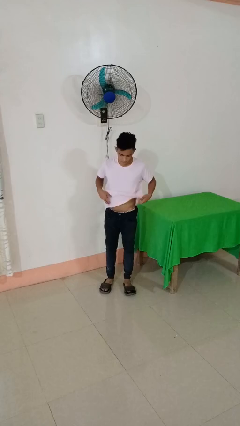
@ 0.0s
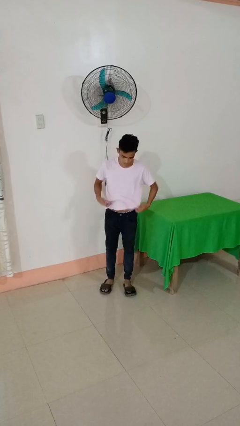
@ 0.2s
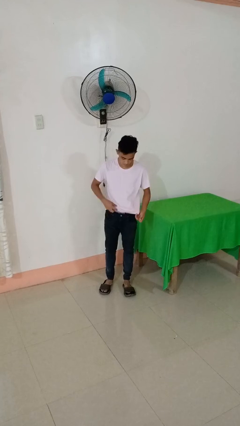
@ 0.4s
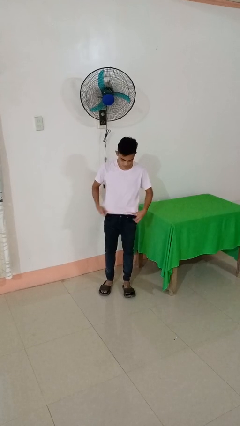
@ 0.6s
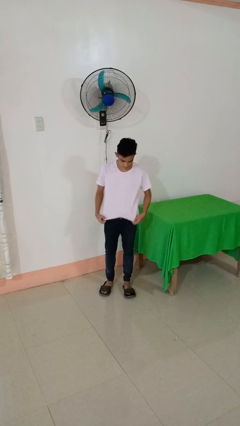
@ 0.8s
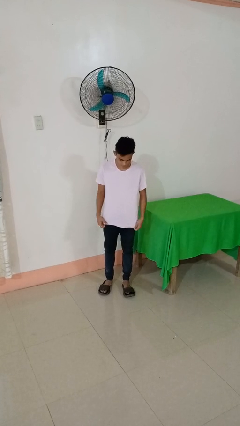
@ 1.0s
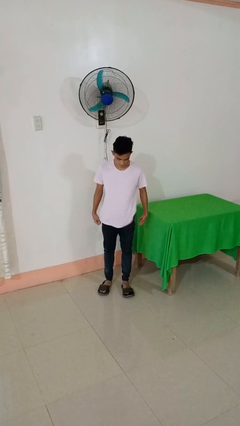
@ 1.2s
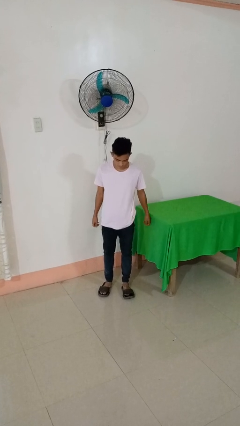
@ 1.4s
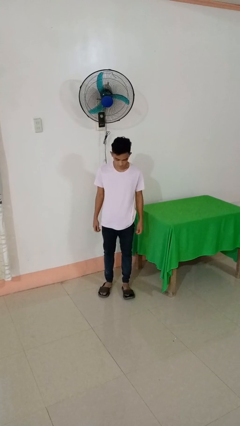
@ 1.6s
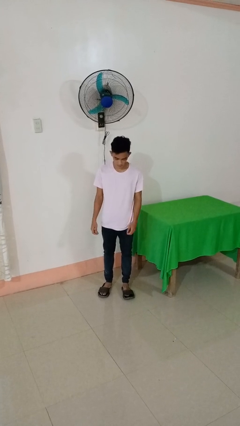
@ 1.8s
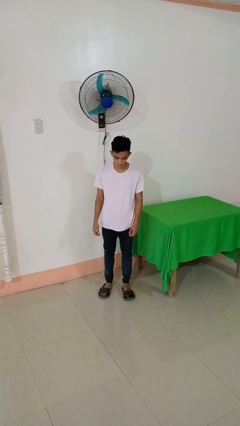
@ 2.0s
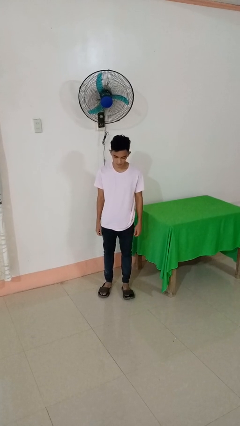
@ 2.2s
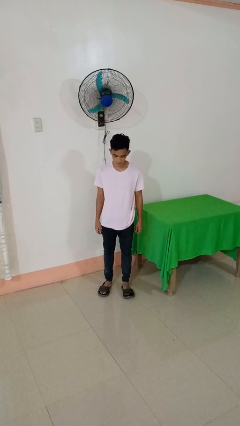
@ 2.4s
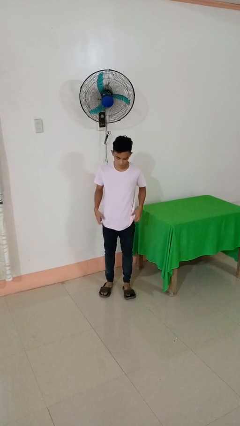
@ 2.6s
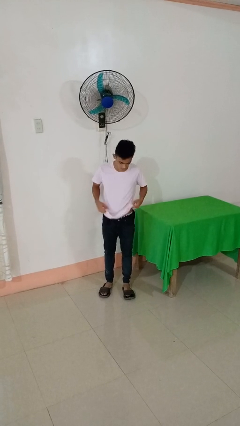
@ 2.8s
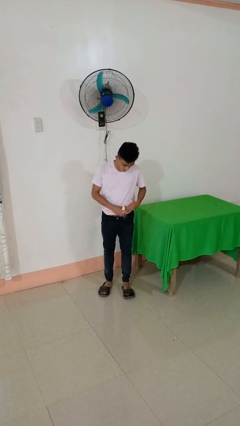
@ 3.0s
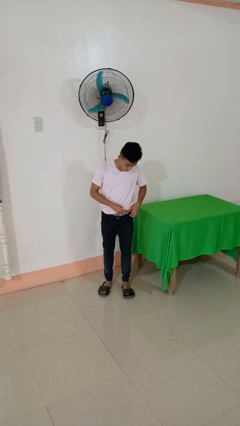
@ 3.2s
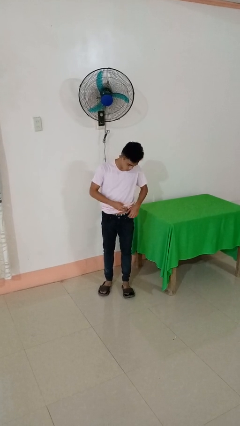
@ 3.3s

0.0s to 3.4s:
person untucks shirt

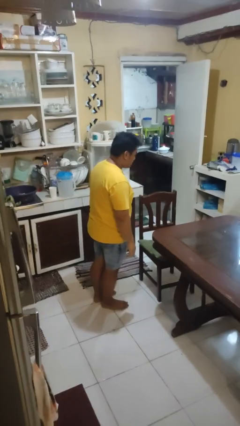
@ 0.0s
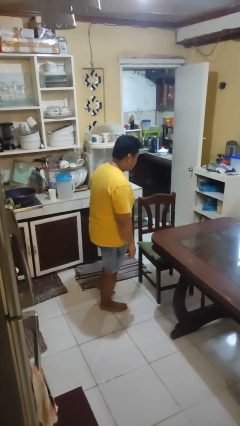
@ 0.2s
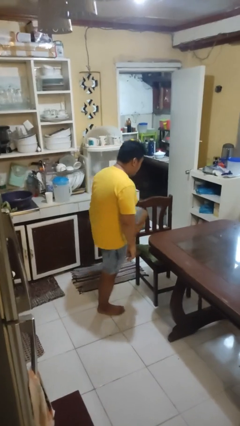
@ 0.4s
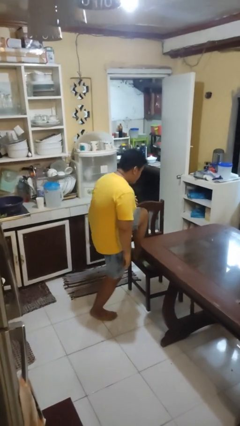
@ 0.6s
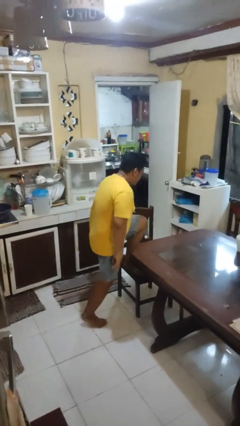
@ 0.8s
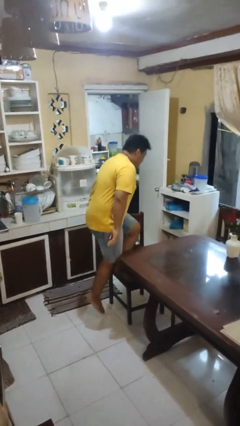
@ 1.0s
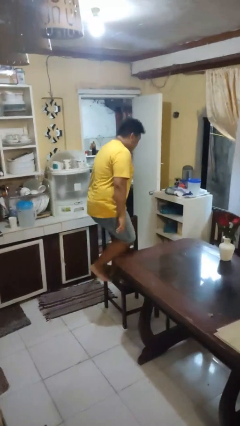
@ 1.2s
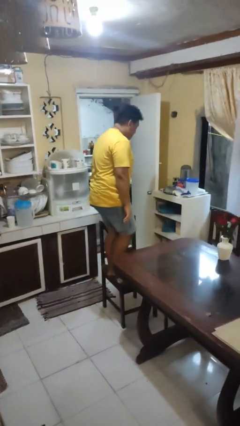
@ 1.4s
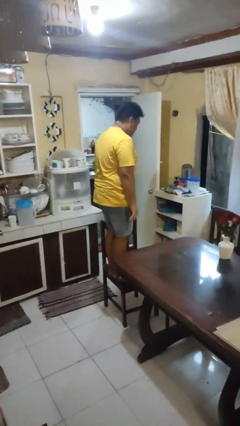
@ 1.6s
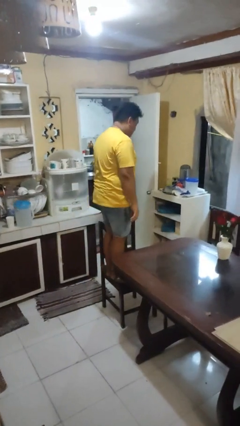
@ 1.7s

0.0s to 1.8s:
person climbs on chair

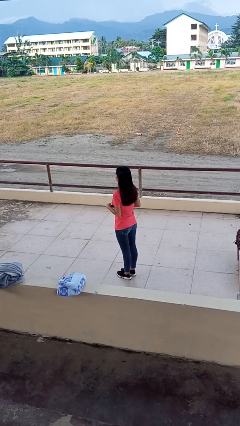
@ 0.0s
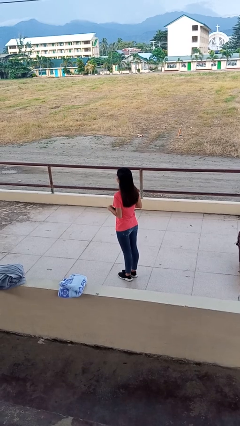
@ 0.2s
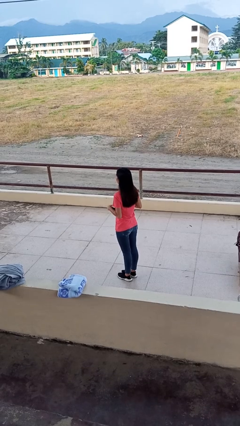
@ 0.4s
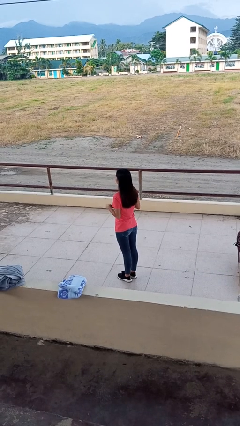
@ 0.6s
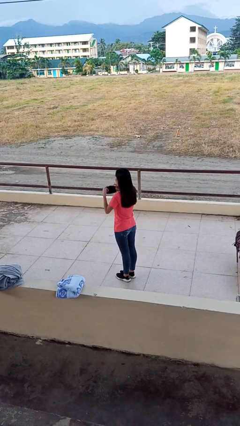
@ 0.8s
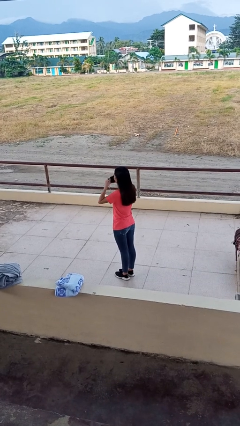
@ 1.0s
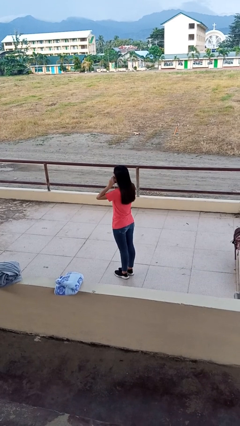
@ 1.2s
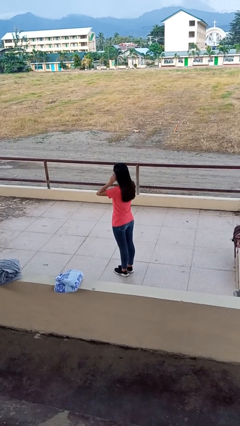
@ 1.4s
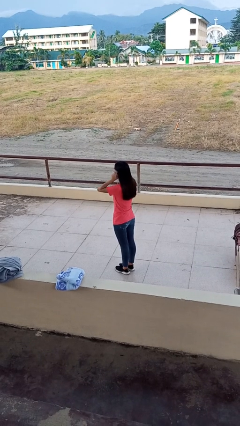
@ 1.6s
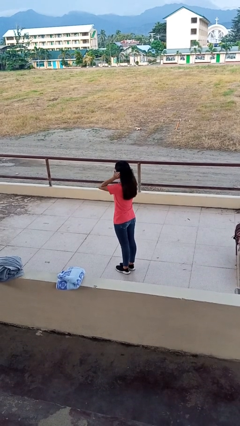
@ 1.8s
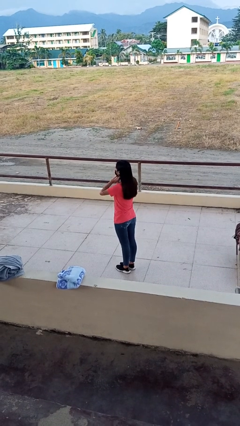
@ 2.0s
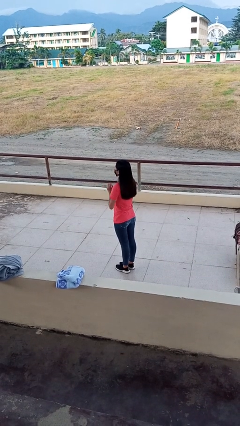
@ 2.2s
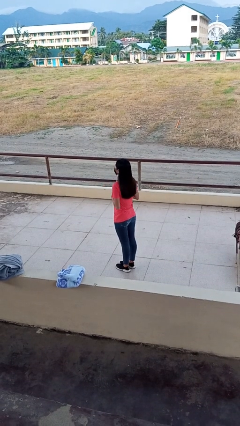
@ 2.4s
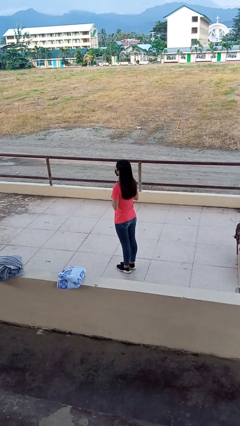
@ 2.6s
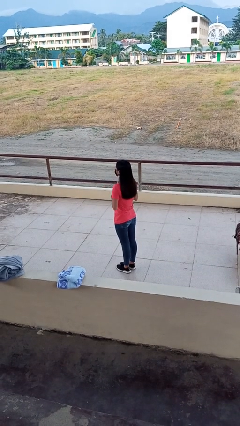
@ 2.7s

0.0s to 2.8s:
person puts on facemask

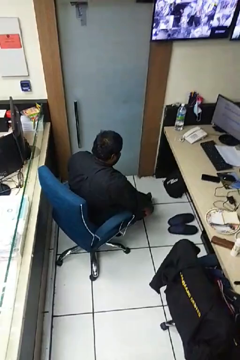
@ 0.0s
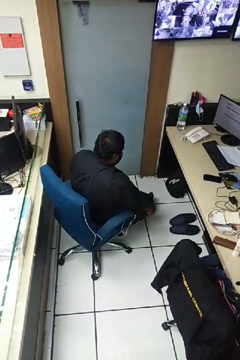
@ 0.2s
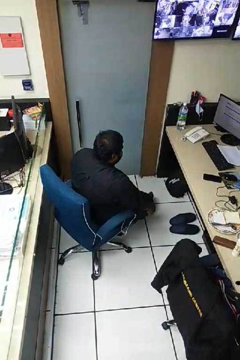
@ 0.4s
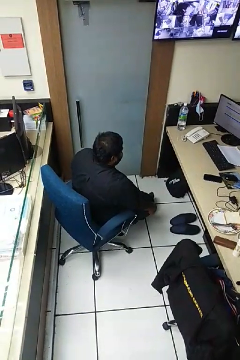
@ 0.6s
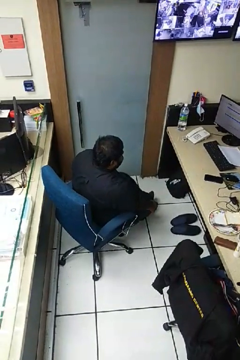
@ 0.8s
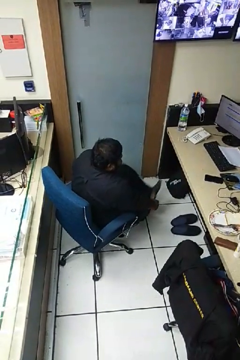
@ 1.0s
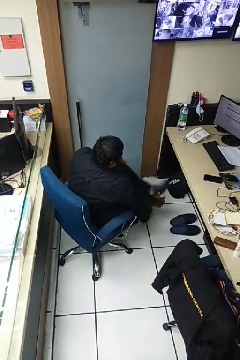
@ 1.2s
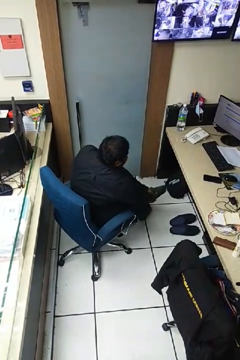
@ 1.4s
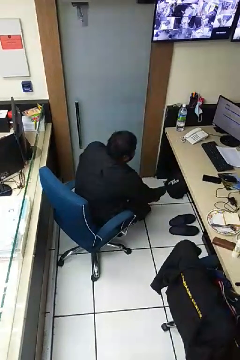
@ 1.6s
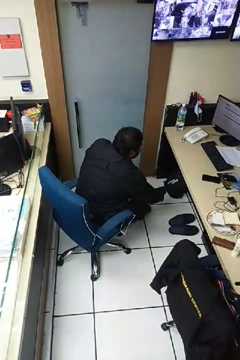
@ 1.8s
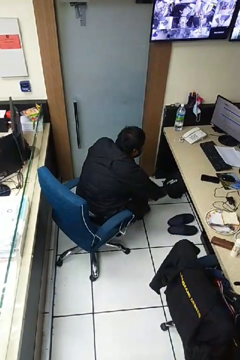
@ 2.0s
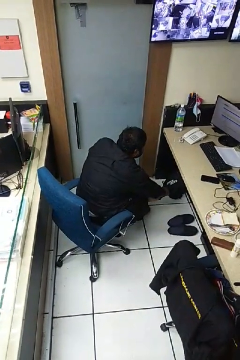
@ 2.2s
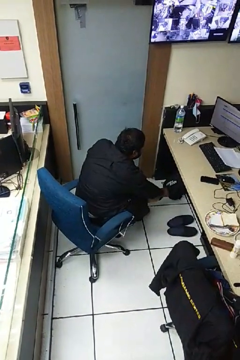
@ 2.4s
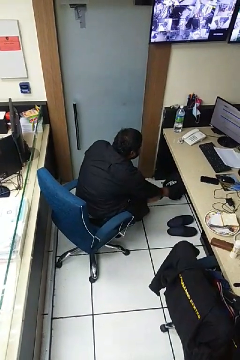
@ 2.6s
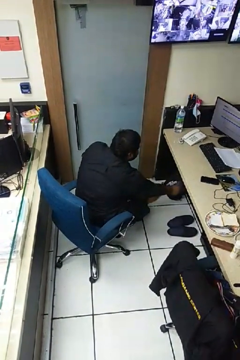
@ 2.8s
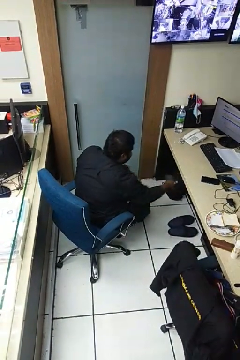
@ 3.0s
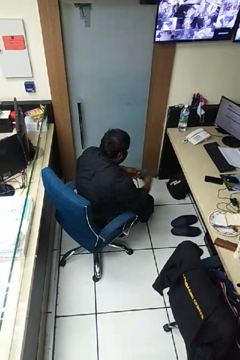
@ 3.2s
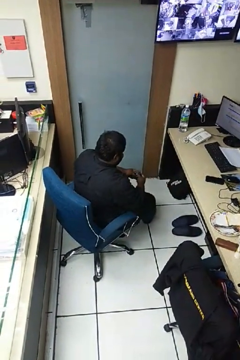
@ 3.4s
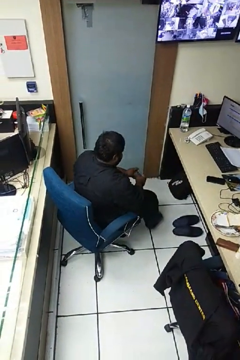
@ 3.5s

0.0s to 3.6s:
person takes off socks

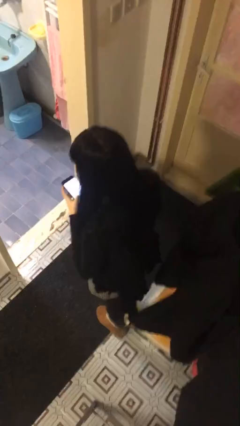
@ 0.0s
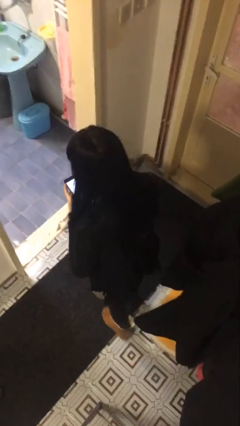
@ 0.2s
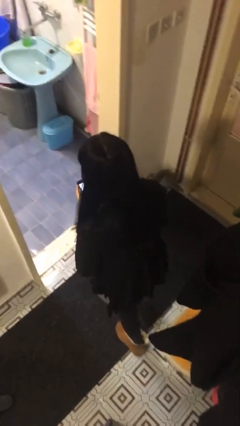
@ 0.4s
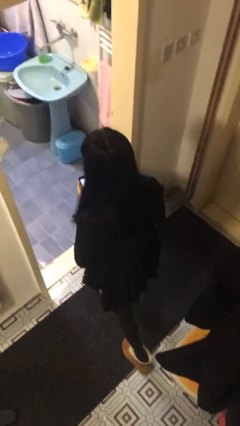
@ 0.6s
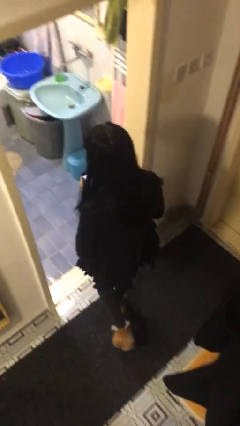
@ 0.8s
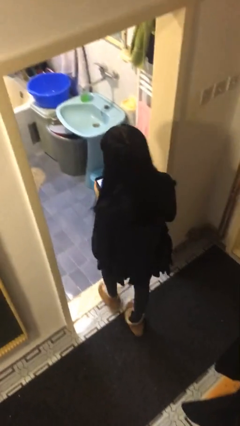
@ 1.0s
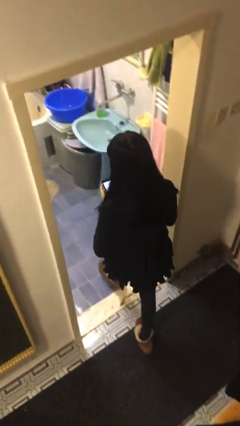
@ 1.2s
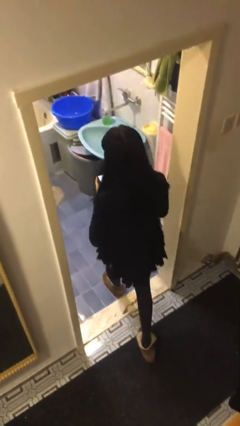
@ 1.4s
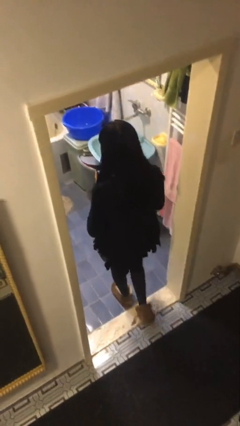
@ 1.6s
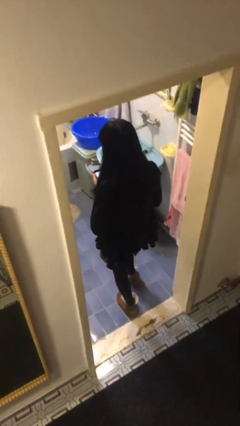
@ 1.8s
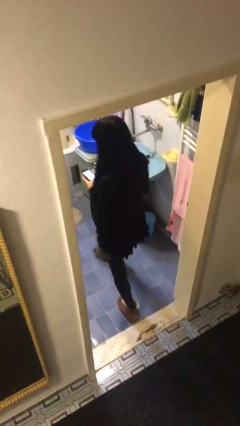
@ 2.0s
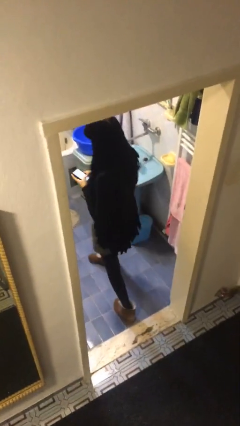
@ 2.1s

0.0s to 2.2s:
person exits scene through structure

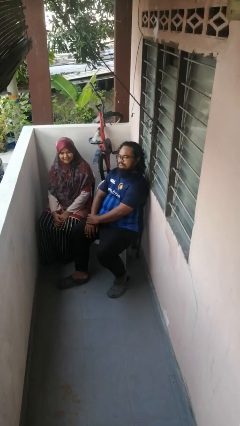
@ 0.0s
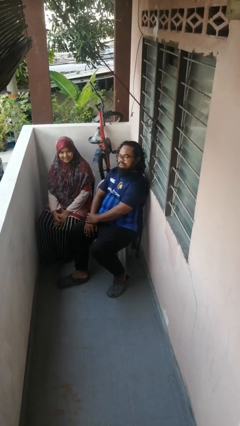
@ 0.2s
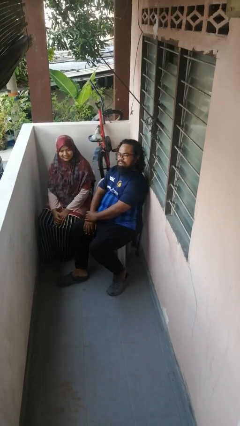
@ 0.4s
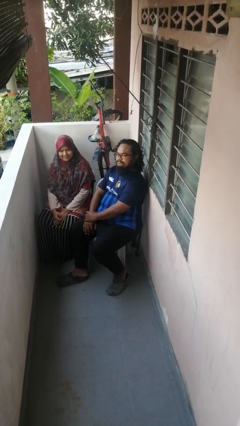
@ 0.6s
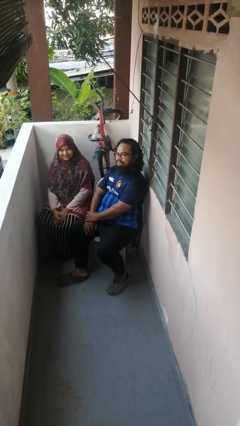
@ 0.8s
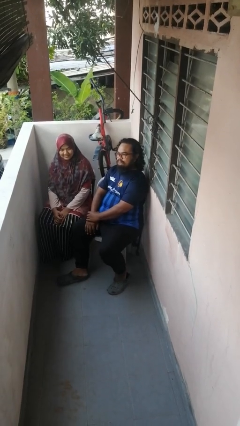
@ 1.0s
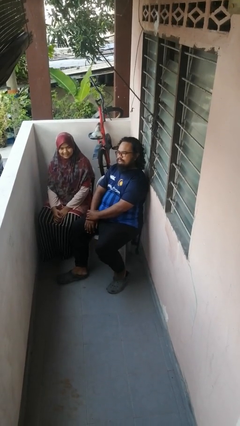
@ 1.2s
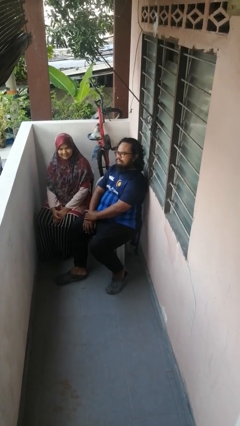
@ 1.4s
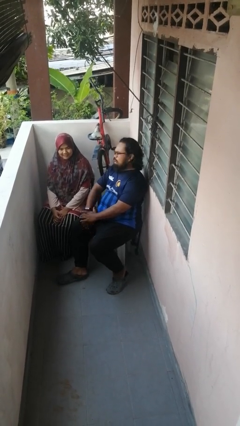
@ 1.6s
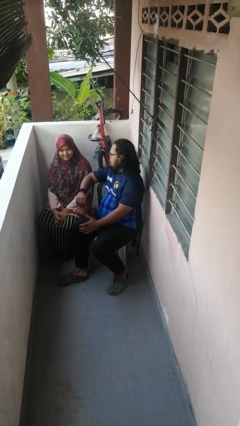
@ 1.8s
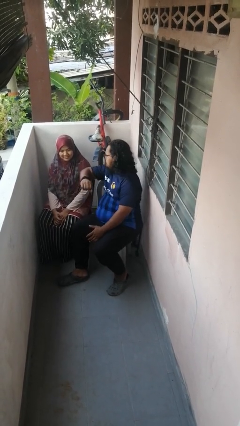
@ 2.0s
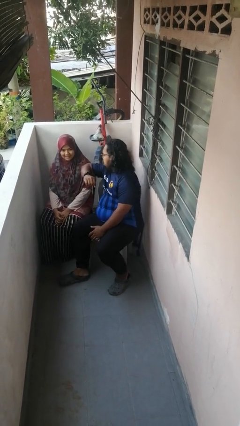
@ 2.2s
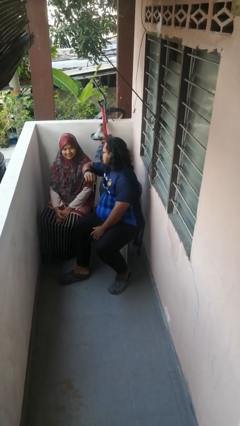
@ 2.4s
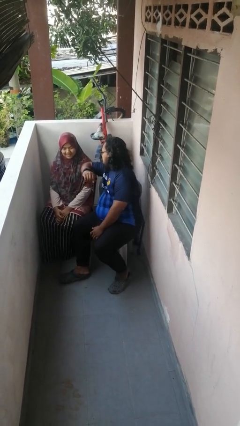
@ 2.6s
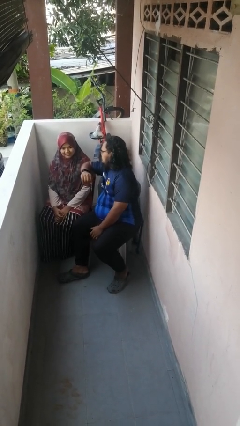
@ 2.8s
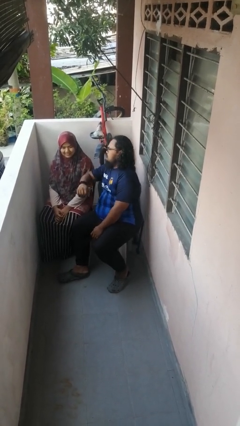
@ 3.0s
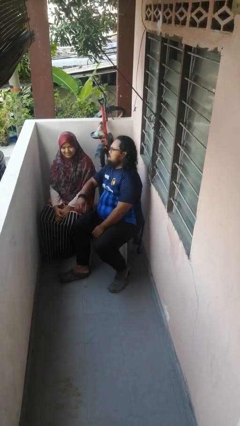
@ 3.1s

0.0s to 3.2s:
person nudges person with elbow

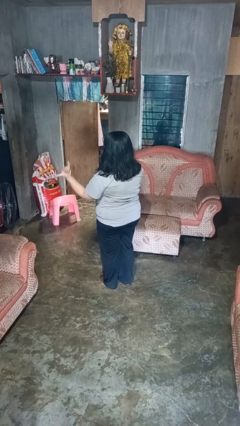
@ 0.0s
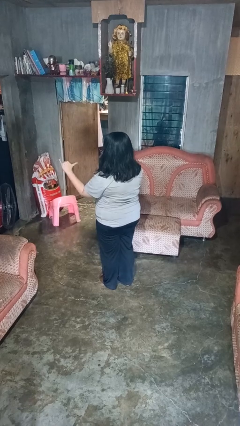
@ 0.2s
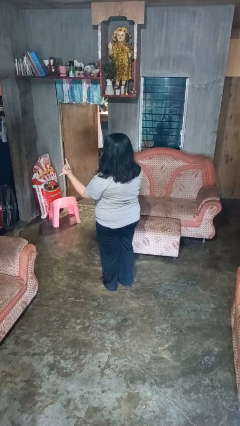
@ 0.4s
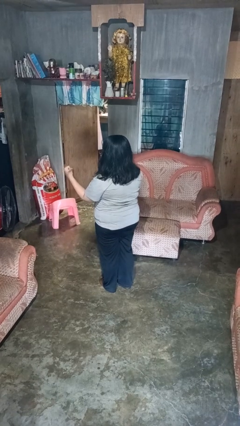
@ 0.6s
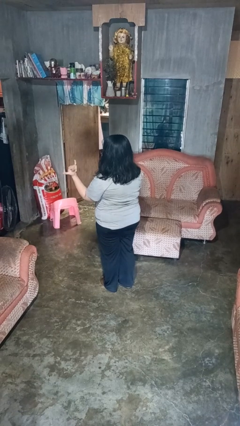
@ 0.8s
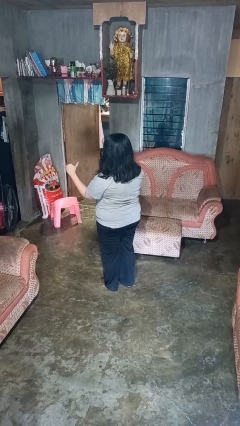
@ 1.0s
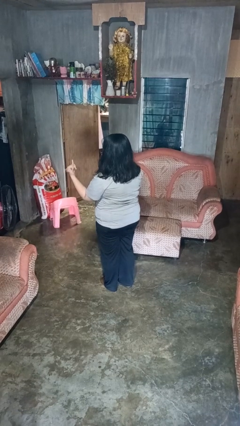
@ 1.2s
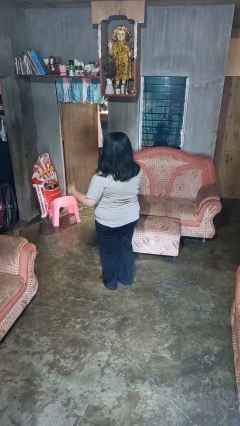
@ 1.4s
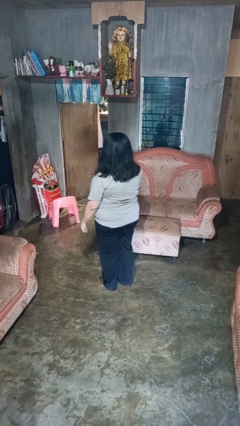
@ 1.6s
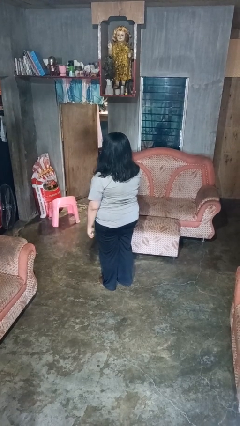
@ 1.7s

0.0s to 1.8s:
person gestures hang loose
